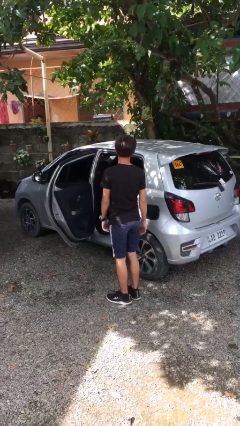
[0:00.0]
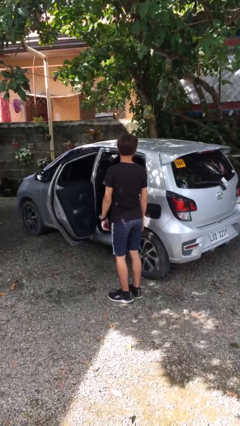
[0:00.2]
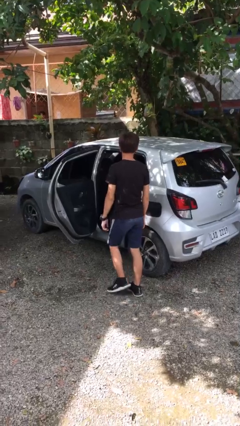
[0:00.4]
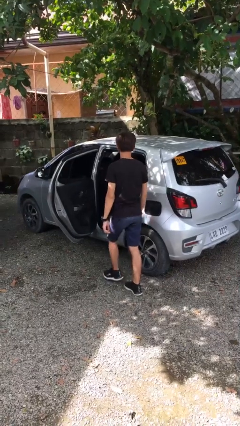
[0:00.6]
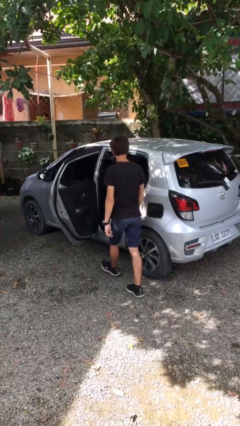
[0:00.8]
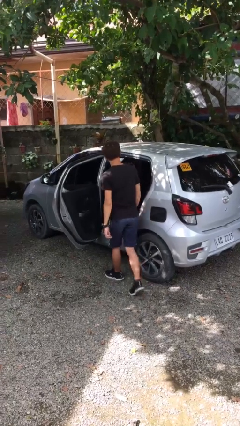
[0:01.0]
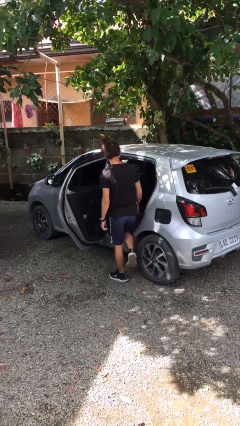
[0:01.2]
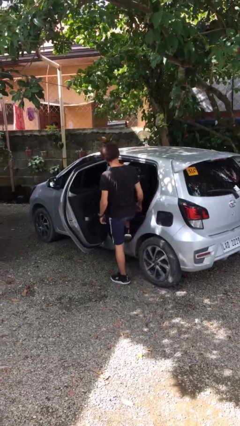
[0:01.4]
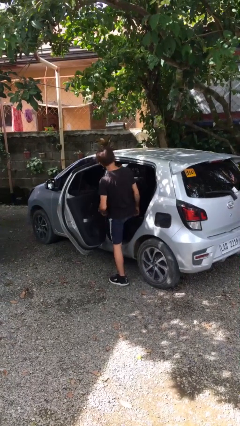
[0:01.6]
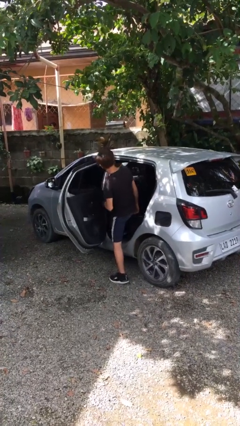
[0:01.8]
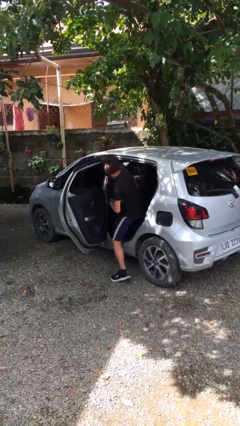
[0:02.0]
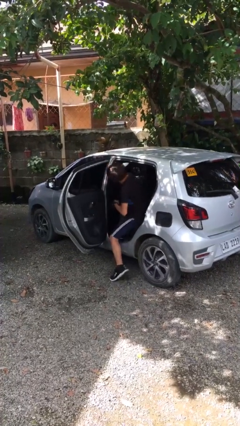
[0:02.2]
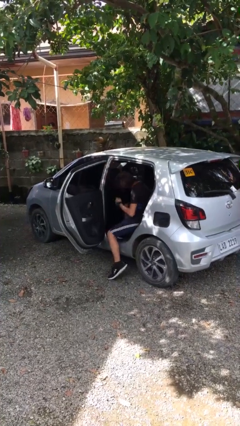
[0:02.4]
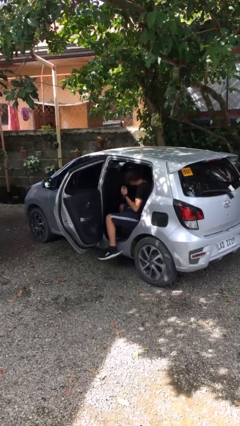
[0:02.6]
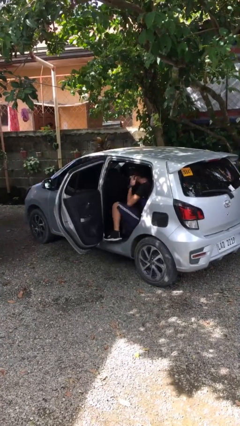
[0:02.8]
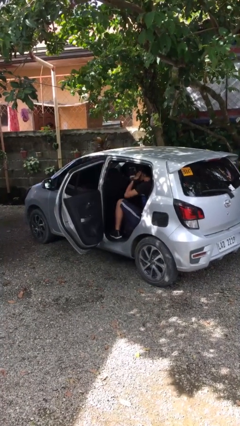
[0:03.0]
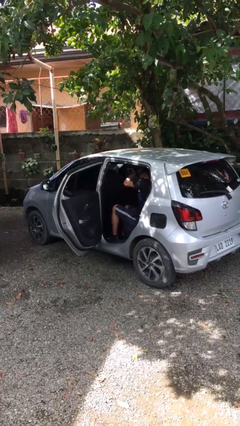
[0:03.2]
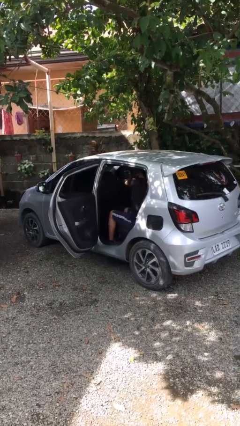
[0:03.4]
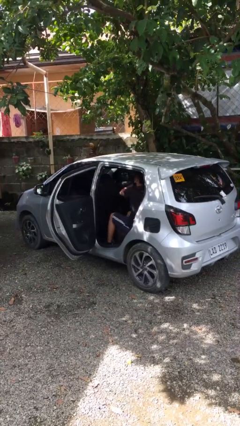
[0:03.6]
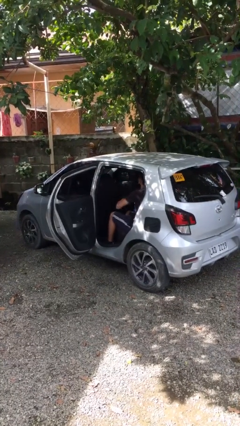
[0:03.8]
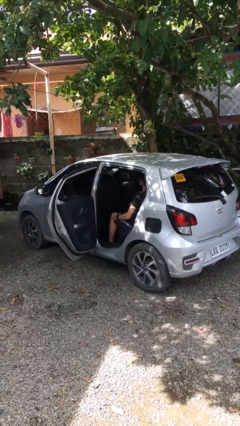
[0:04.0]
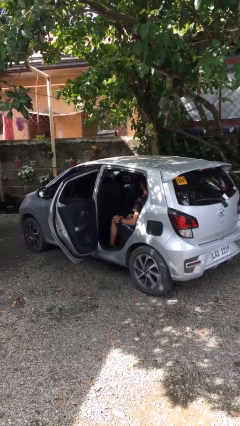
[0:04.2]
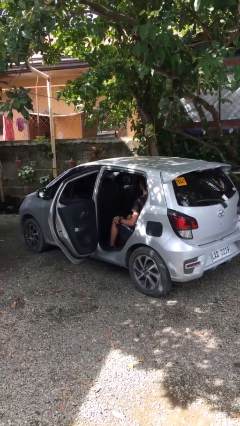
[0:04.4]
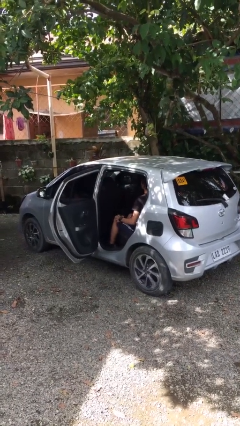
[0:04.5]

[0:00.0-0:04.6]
person enters car

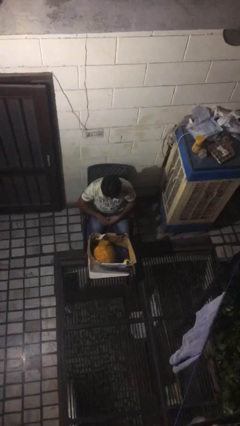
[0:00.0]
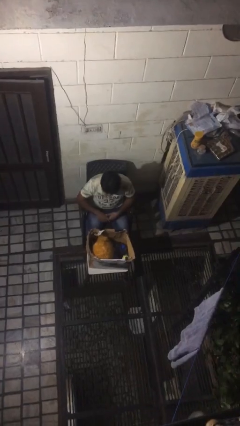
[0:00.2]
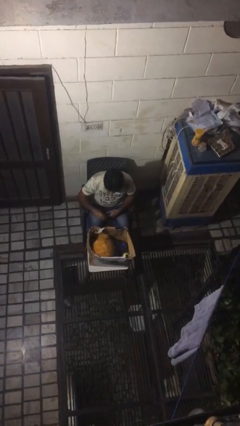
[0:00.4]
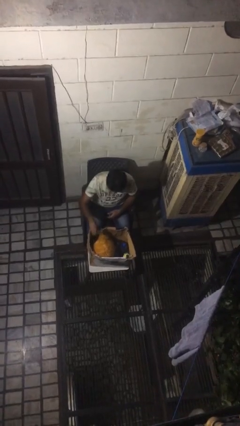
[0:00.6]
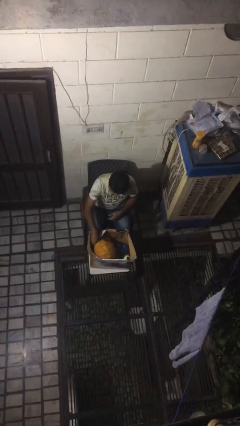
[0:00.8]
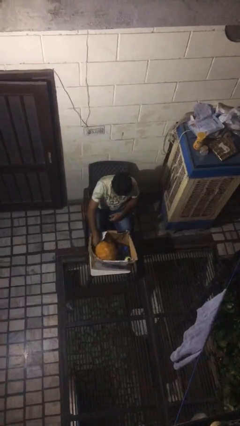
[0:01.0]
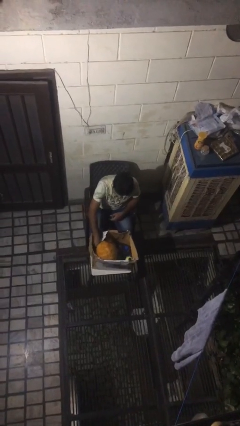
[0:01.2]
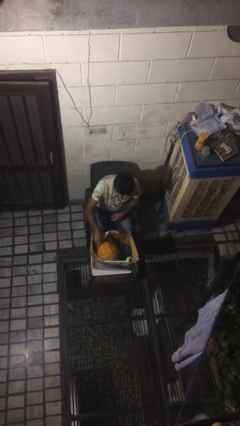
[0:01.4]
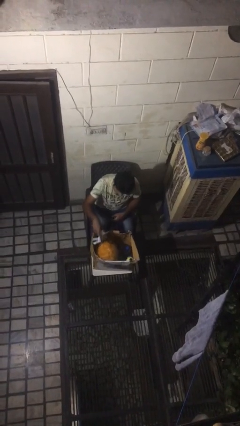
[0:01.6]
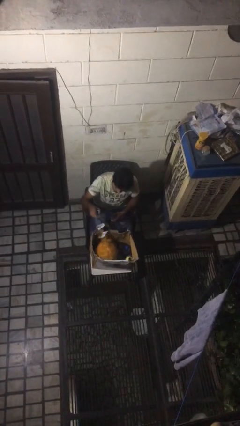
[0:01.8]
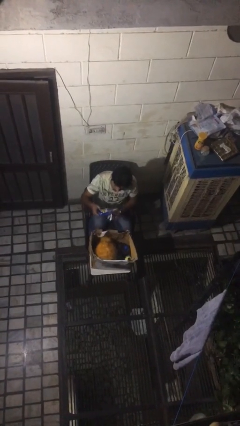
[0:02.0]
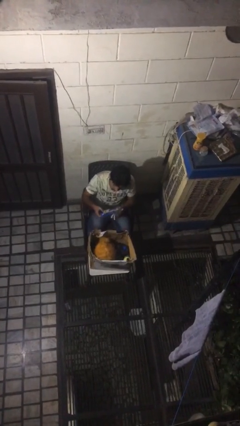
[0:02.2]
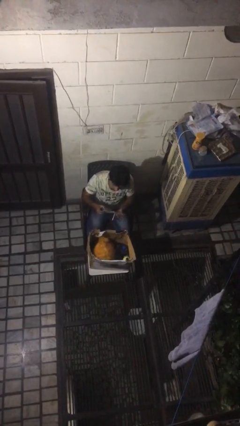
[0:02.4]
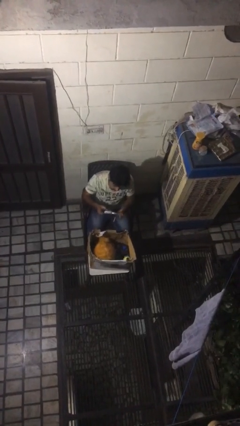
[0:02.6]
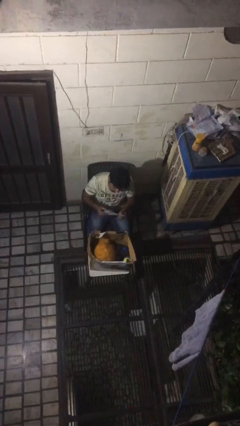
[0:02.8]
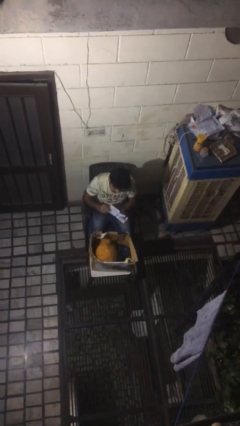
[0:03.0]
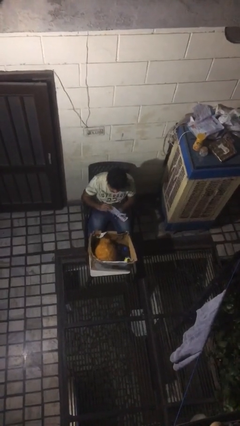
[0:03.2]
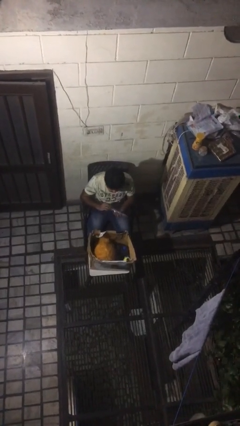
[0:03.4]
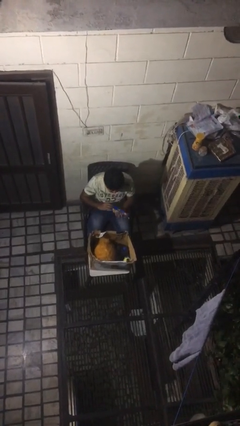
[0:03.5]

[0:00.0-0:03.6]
person takes object from box

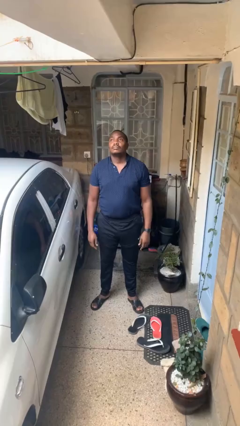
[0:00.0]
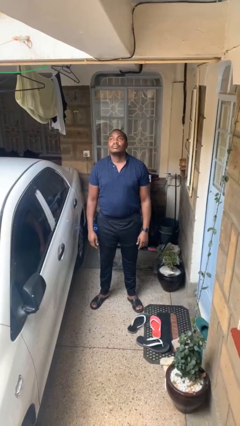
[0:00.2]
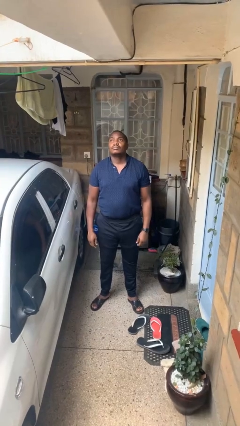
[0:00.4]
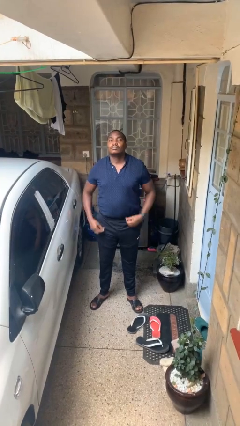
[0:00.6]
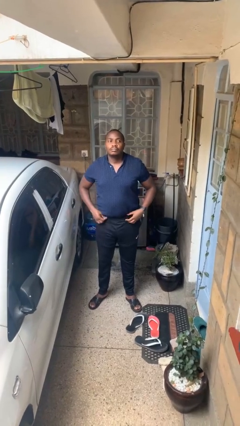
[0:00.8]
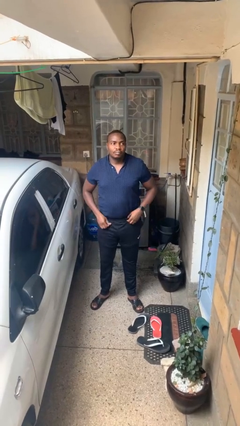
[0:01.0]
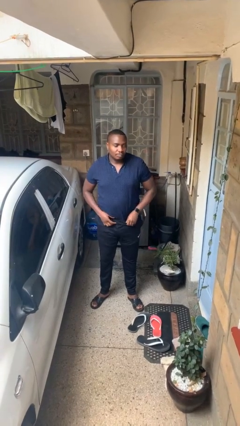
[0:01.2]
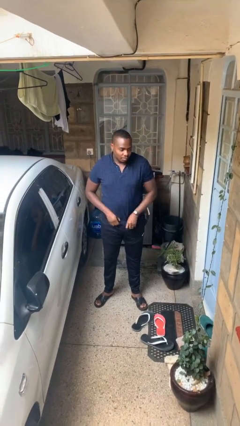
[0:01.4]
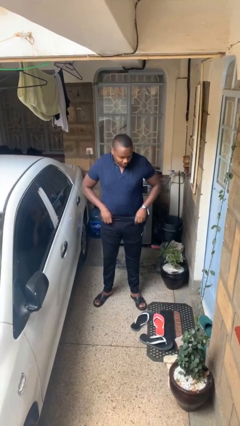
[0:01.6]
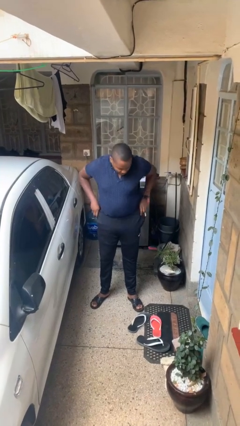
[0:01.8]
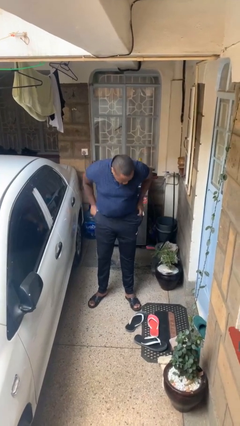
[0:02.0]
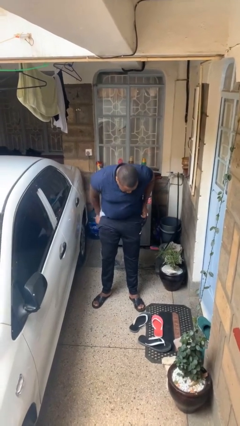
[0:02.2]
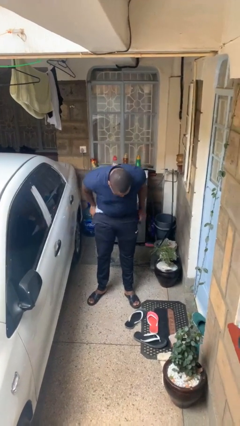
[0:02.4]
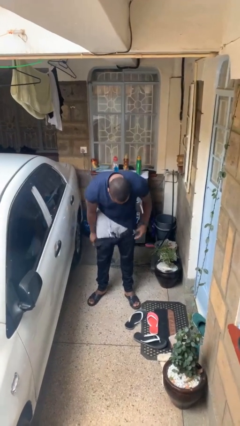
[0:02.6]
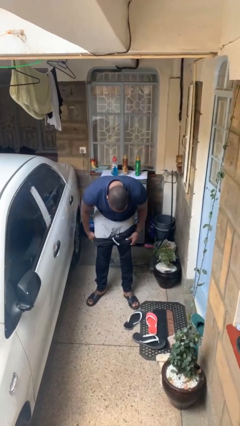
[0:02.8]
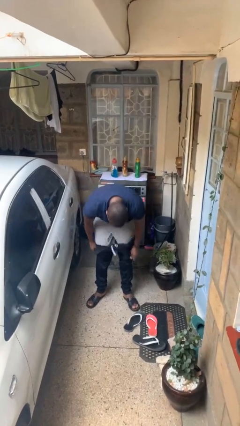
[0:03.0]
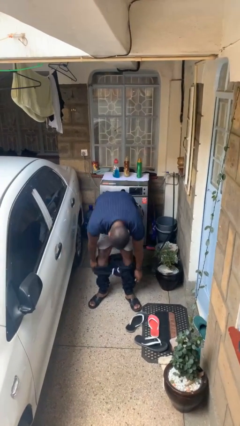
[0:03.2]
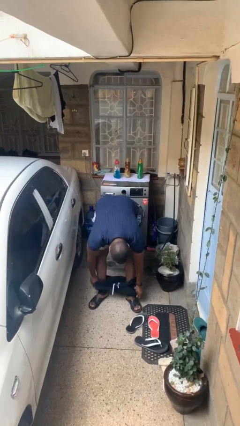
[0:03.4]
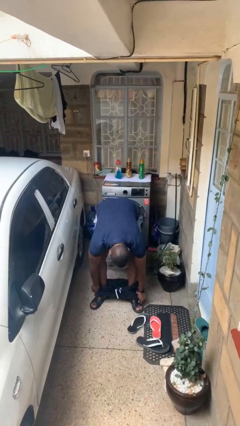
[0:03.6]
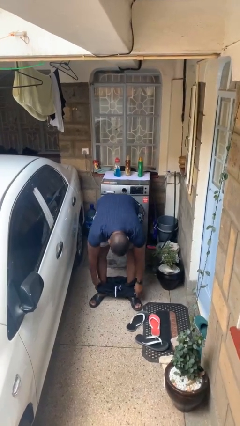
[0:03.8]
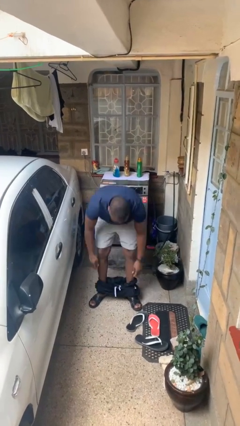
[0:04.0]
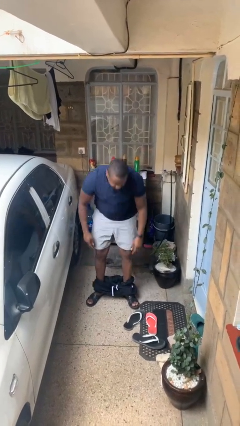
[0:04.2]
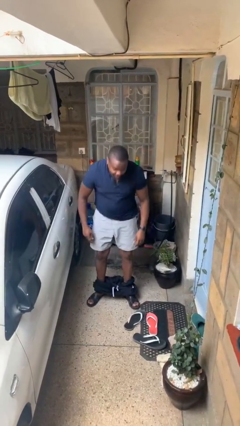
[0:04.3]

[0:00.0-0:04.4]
person takes off pants

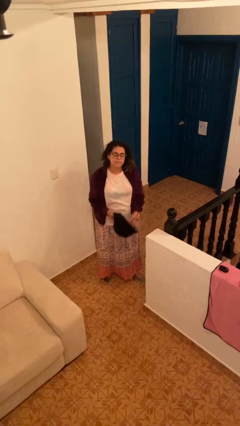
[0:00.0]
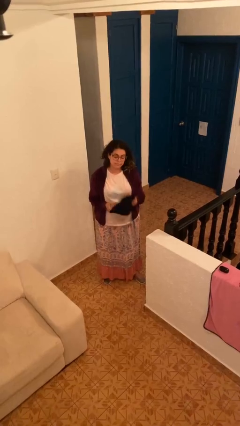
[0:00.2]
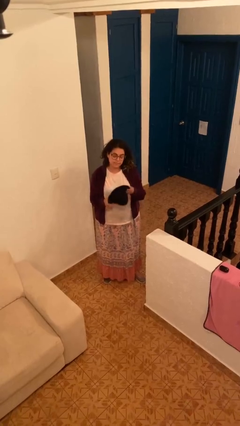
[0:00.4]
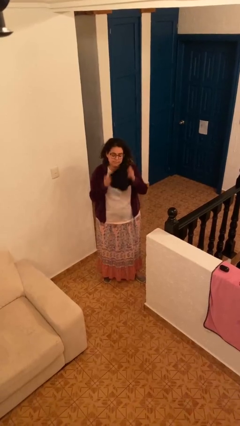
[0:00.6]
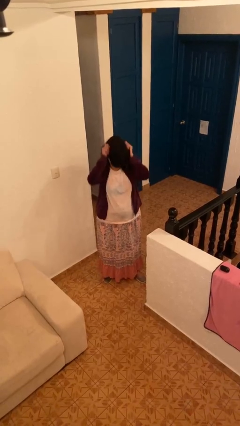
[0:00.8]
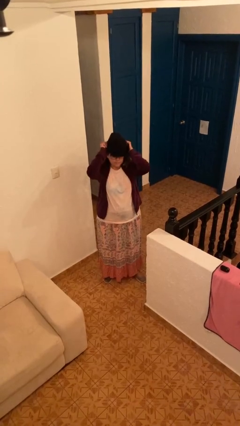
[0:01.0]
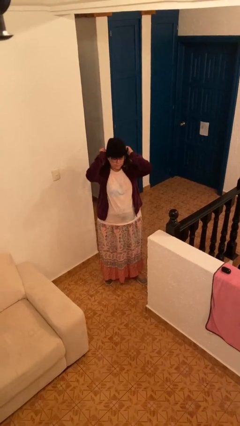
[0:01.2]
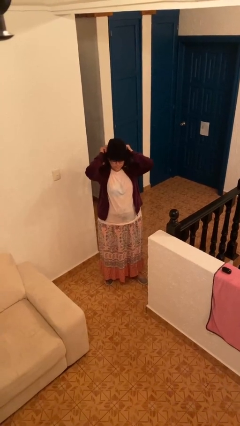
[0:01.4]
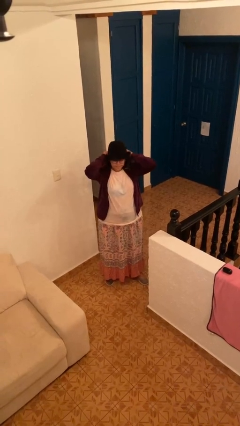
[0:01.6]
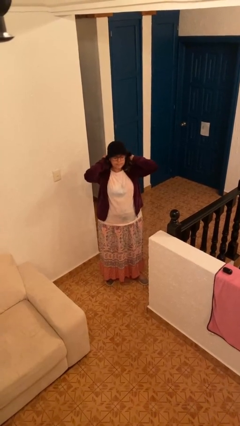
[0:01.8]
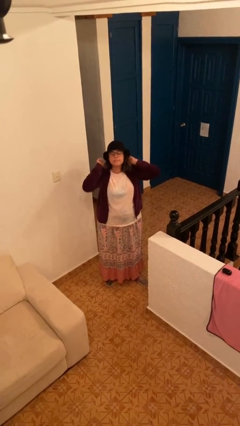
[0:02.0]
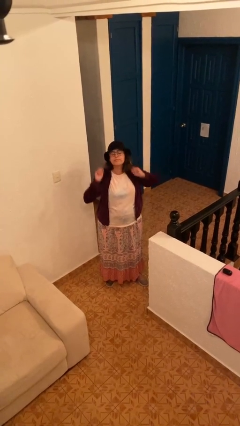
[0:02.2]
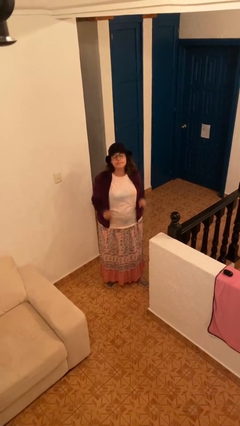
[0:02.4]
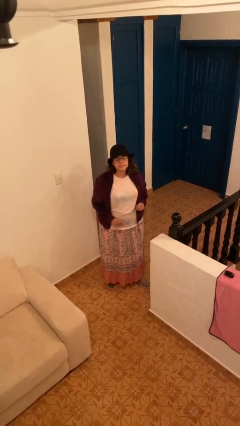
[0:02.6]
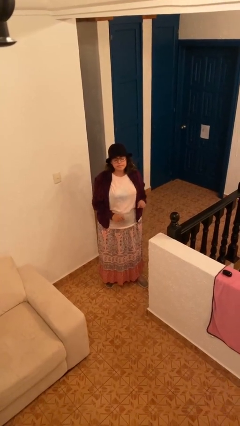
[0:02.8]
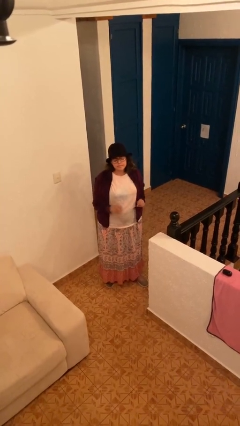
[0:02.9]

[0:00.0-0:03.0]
person puts on hat

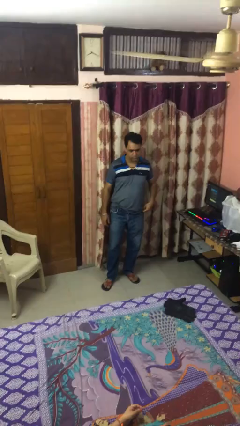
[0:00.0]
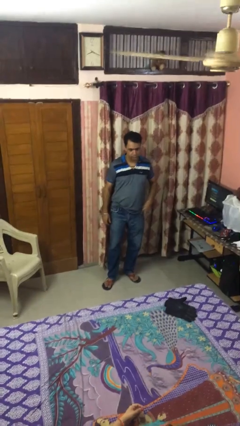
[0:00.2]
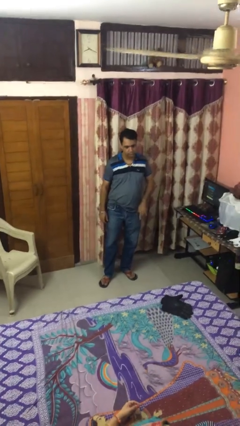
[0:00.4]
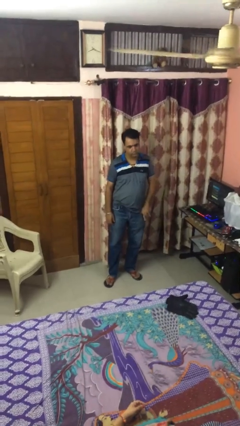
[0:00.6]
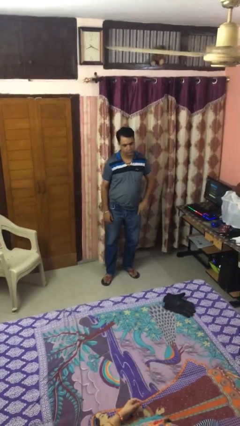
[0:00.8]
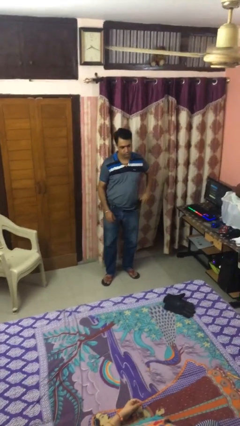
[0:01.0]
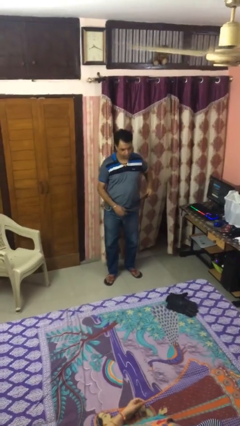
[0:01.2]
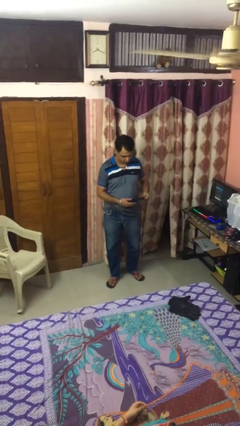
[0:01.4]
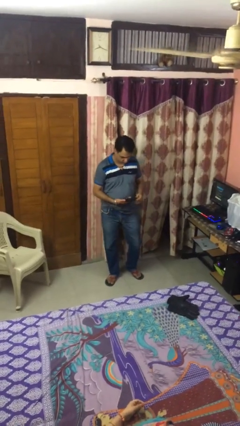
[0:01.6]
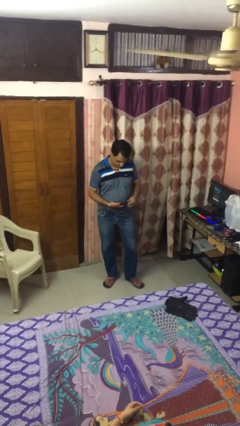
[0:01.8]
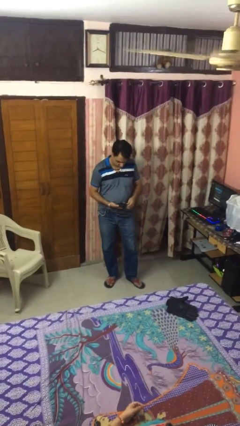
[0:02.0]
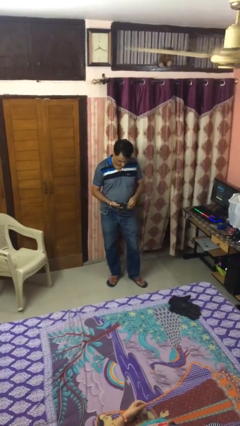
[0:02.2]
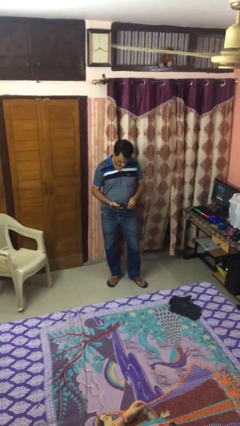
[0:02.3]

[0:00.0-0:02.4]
person takes phone from pocket
